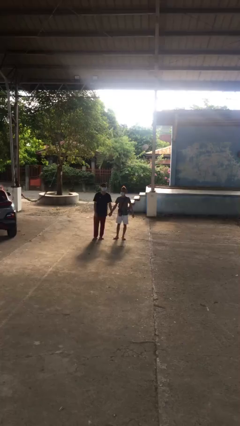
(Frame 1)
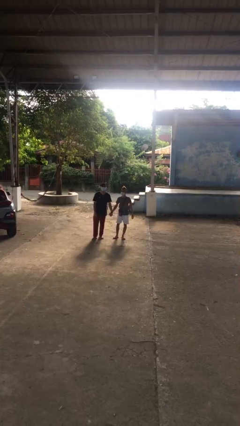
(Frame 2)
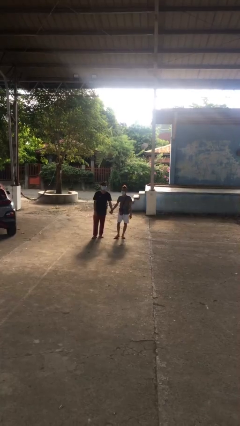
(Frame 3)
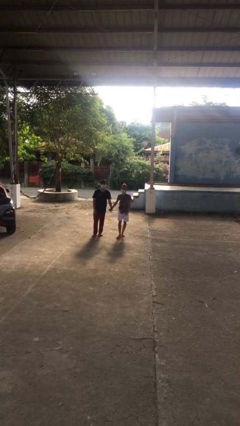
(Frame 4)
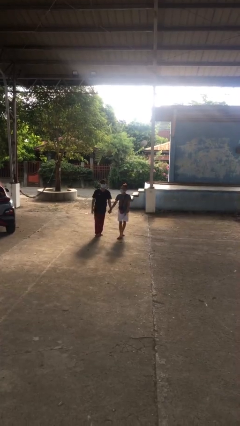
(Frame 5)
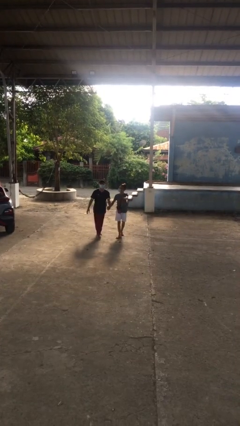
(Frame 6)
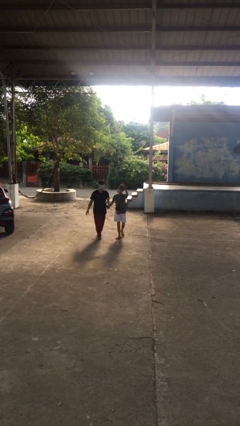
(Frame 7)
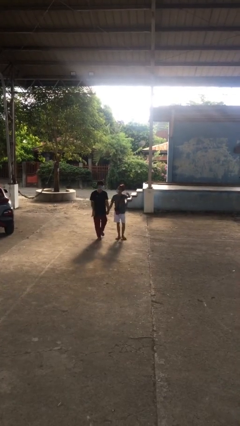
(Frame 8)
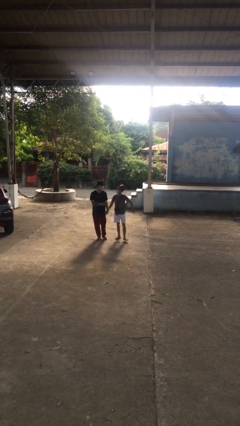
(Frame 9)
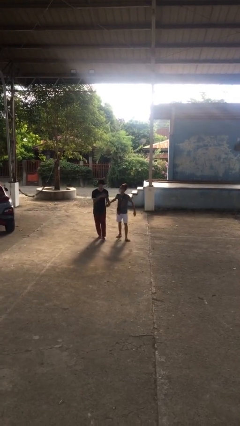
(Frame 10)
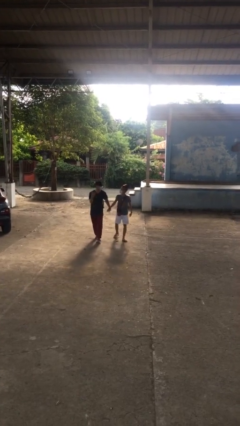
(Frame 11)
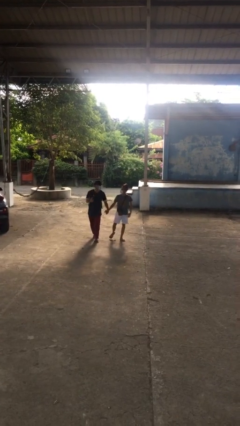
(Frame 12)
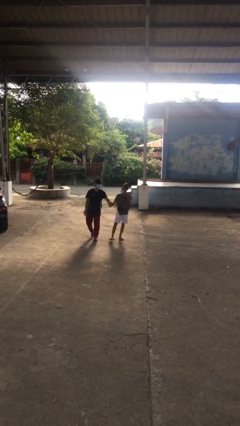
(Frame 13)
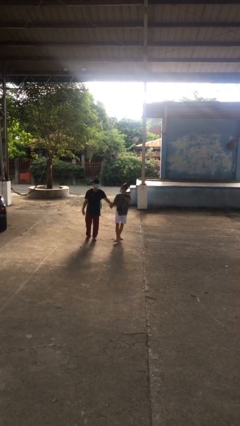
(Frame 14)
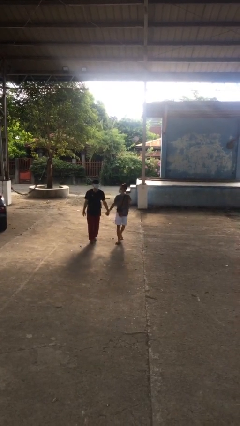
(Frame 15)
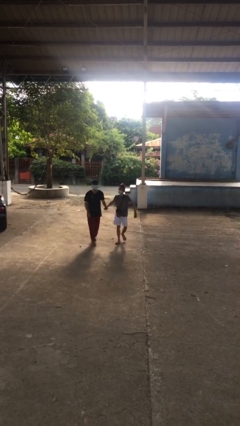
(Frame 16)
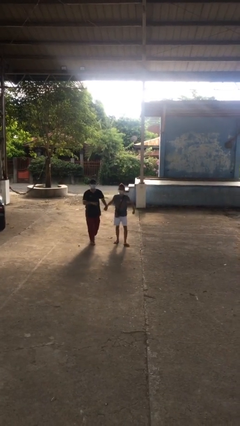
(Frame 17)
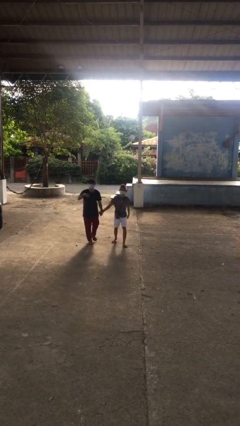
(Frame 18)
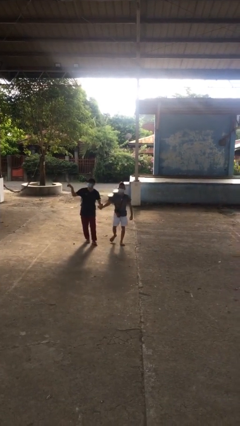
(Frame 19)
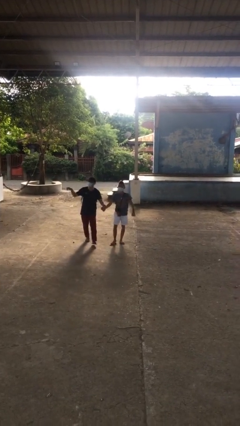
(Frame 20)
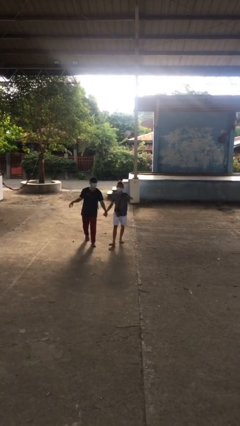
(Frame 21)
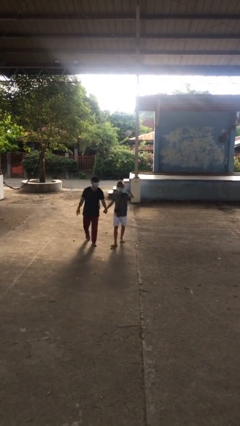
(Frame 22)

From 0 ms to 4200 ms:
person holds hand

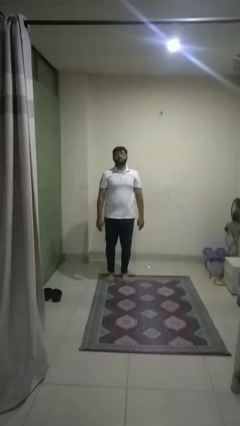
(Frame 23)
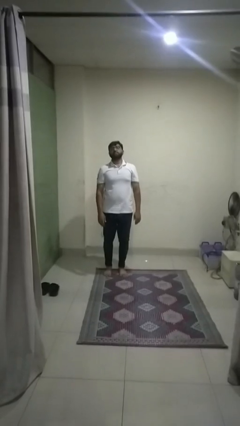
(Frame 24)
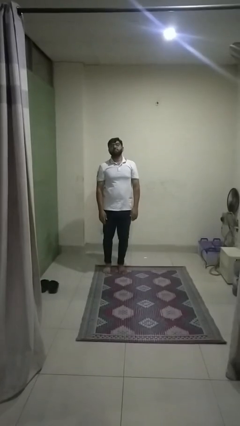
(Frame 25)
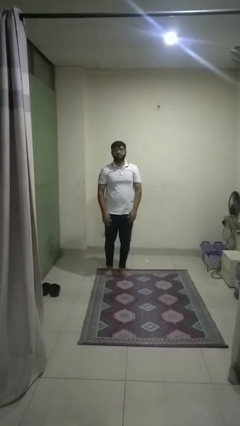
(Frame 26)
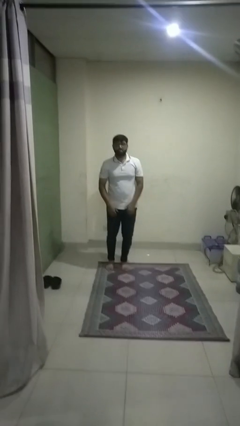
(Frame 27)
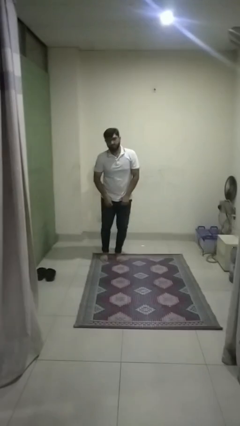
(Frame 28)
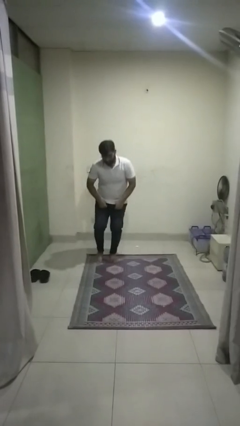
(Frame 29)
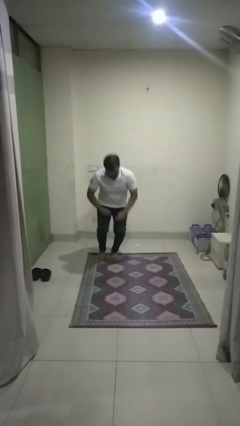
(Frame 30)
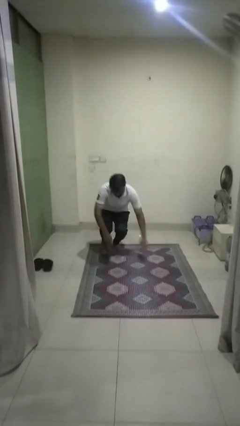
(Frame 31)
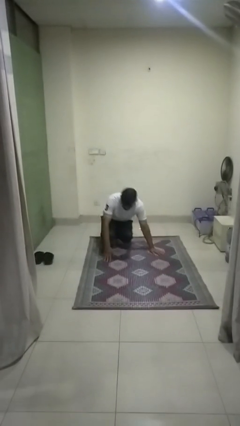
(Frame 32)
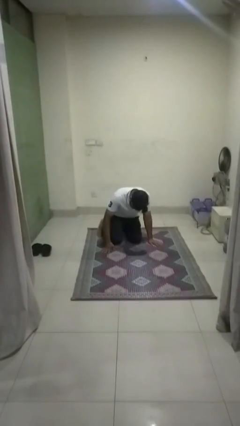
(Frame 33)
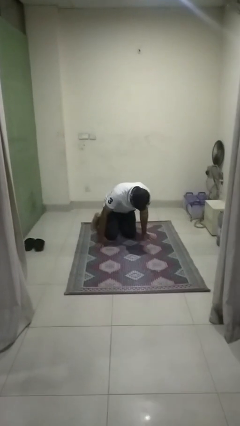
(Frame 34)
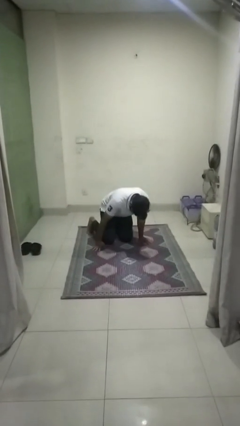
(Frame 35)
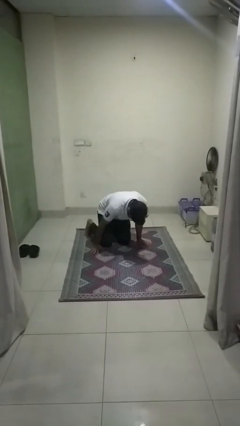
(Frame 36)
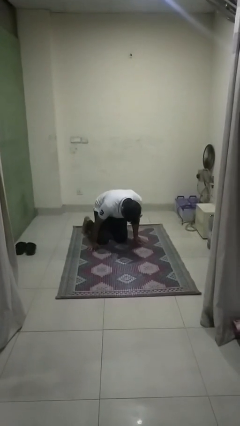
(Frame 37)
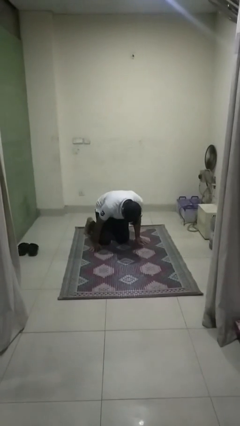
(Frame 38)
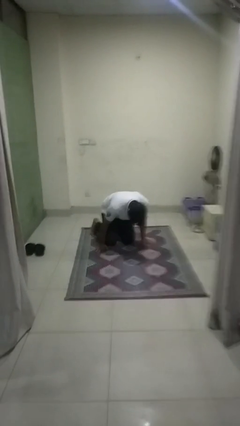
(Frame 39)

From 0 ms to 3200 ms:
person falls while standing

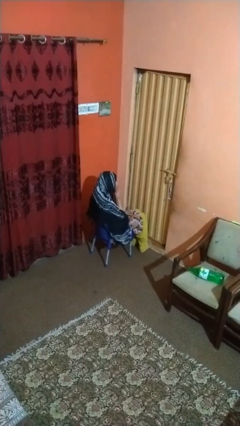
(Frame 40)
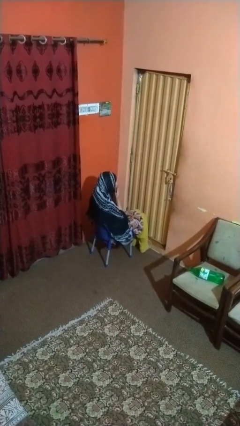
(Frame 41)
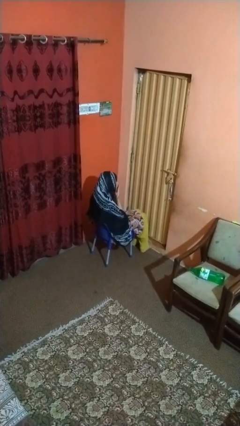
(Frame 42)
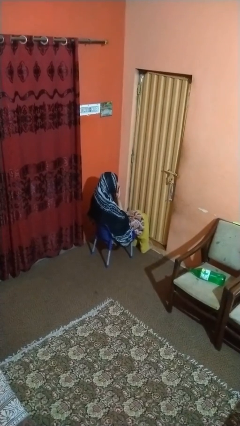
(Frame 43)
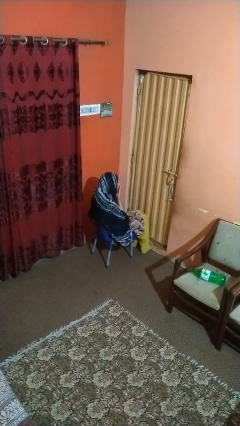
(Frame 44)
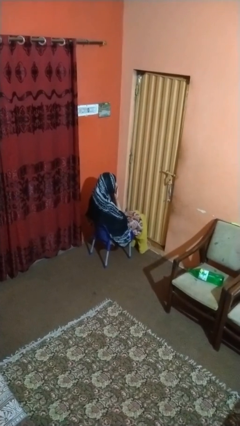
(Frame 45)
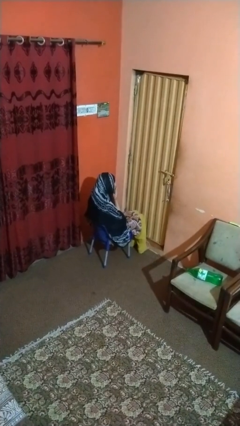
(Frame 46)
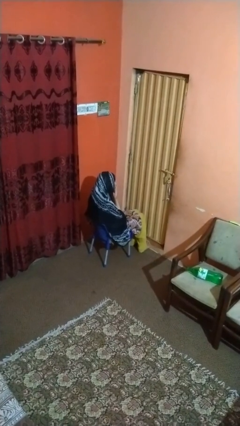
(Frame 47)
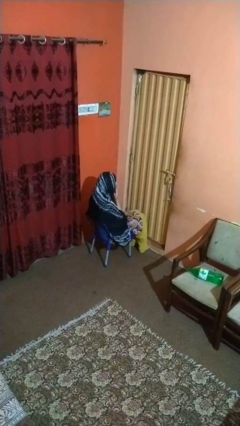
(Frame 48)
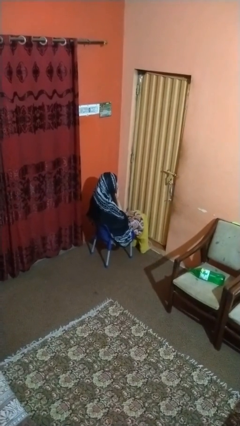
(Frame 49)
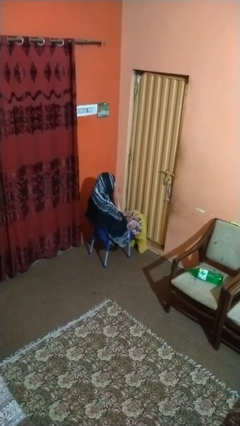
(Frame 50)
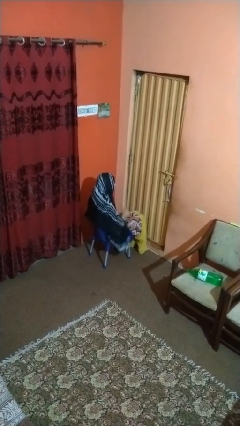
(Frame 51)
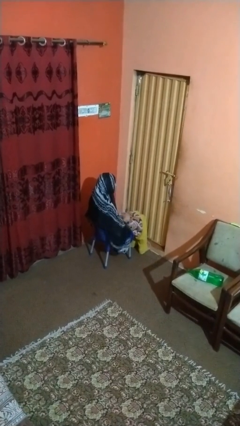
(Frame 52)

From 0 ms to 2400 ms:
person yawns

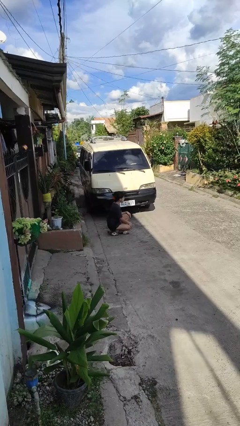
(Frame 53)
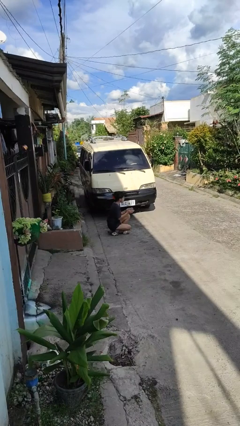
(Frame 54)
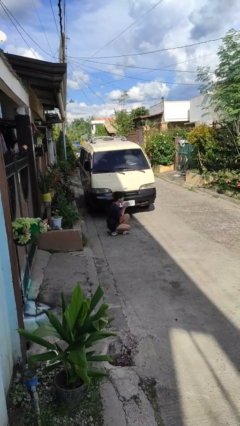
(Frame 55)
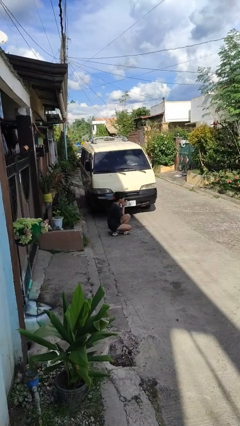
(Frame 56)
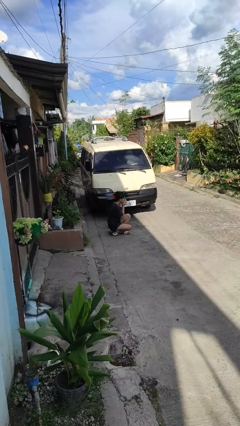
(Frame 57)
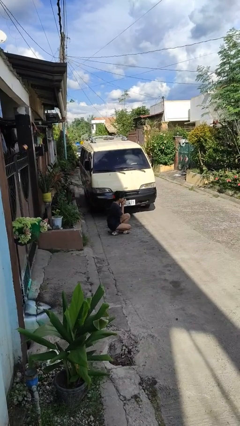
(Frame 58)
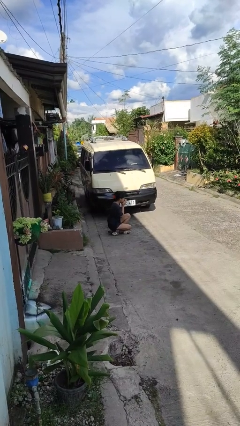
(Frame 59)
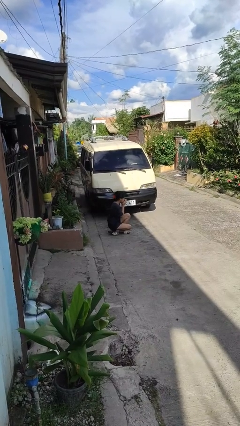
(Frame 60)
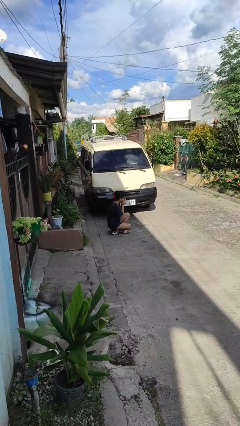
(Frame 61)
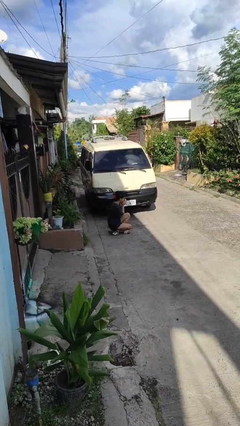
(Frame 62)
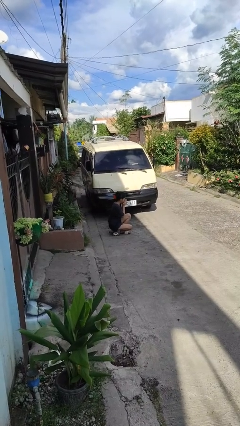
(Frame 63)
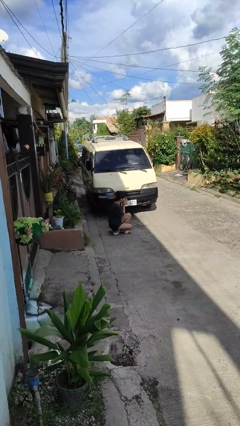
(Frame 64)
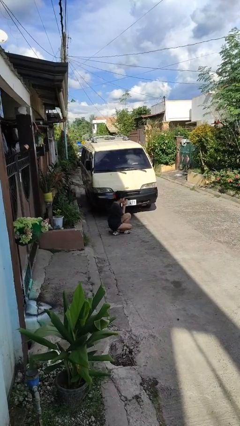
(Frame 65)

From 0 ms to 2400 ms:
person blows into hands

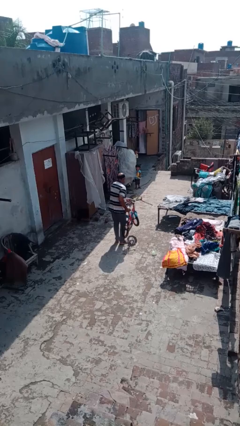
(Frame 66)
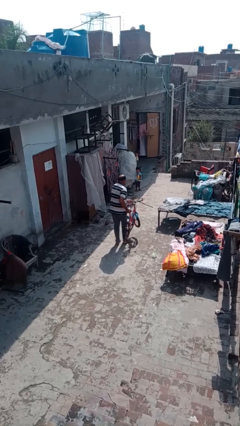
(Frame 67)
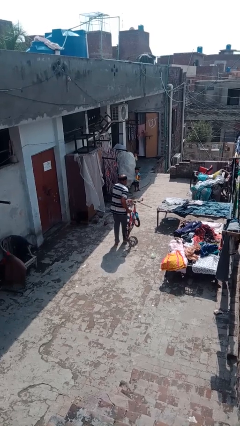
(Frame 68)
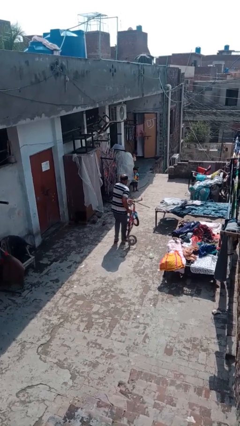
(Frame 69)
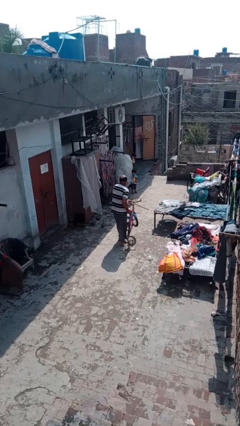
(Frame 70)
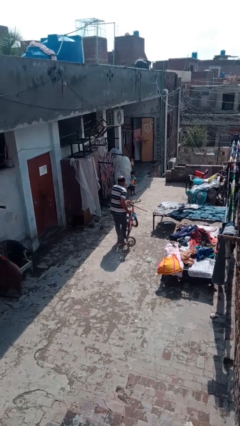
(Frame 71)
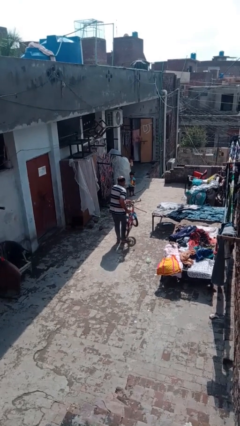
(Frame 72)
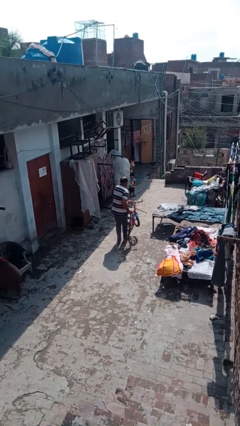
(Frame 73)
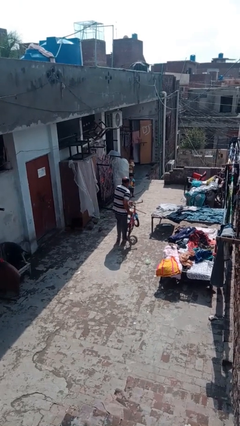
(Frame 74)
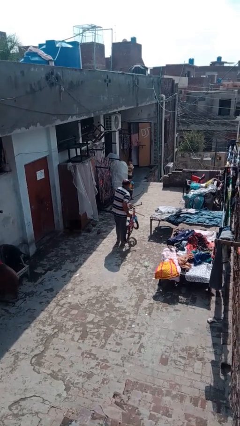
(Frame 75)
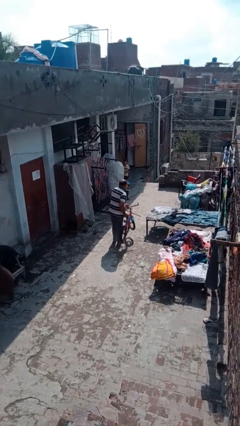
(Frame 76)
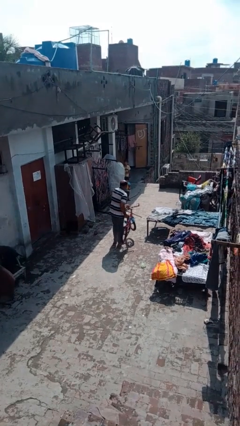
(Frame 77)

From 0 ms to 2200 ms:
person carries bicycle

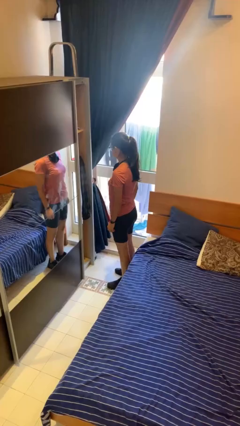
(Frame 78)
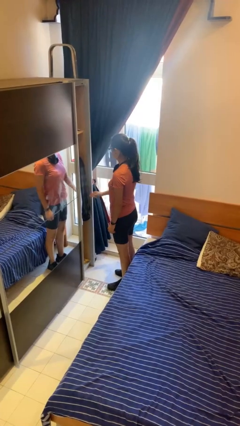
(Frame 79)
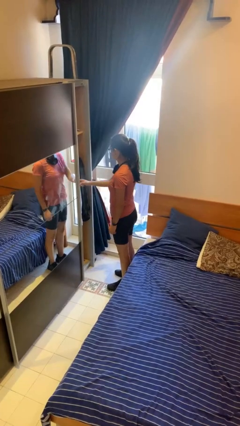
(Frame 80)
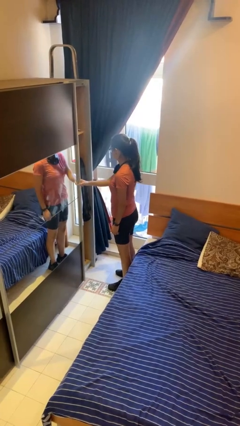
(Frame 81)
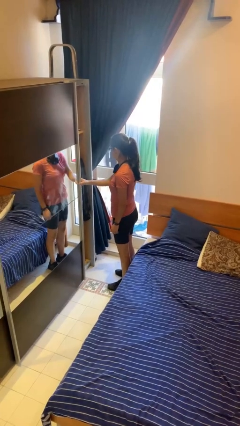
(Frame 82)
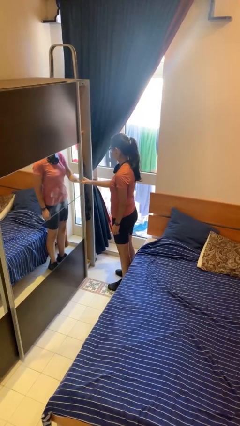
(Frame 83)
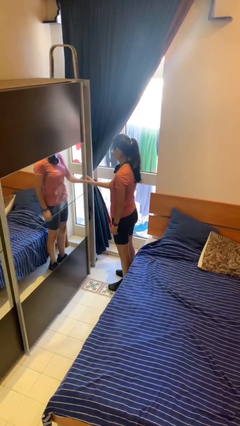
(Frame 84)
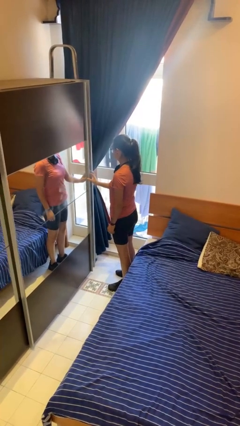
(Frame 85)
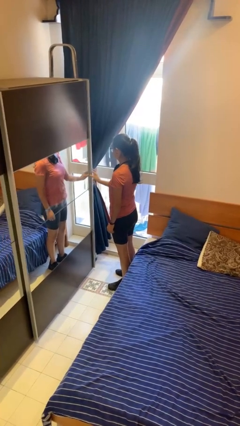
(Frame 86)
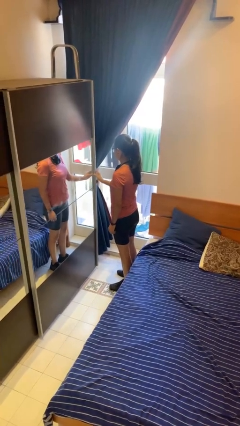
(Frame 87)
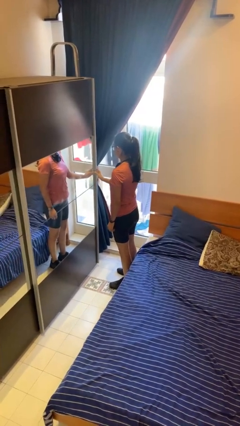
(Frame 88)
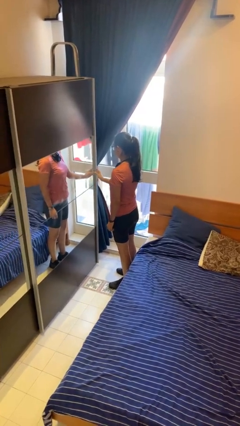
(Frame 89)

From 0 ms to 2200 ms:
person closes closet door

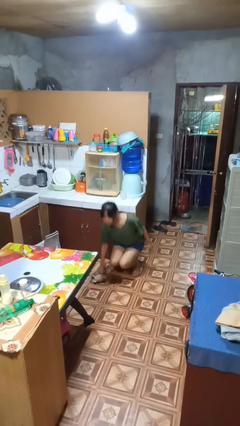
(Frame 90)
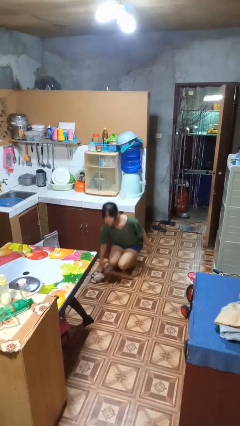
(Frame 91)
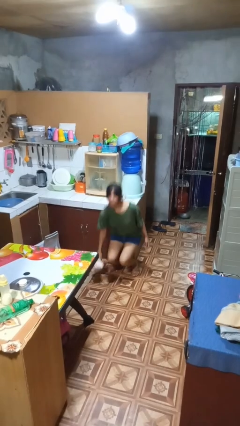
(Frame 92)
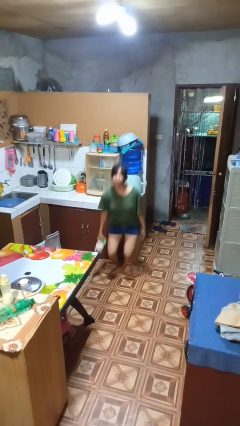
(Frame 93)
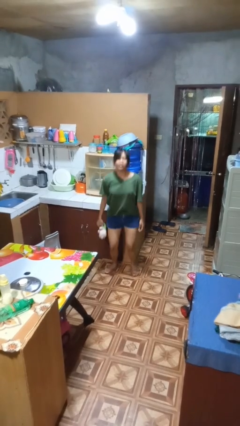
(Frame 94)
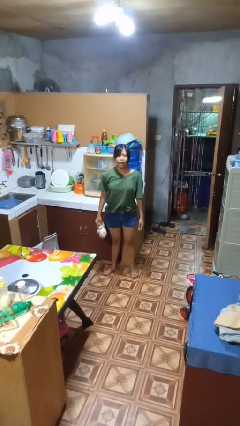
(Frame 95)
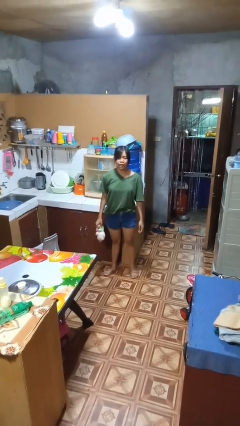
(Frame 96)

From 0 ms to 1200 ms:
person picks up object from floor
